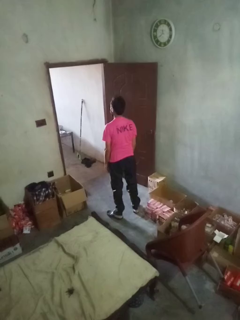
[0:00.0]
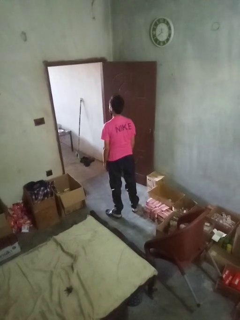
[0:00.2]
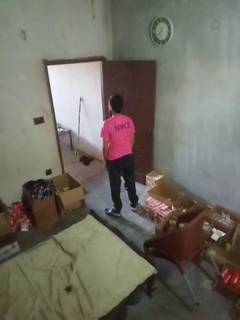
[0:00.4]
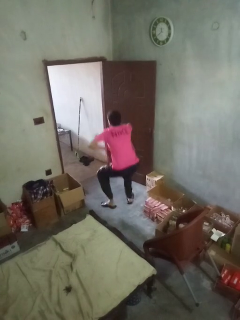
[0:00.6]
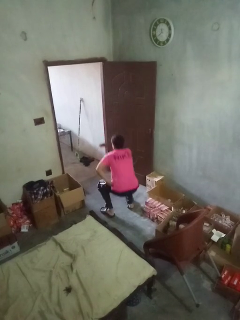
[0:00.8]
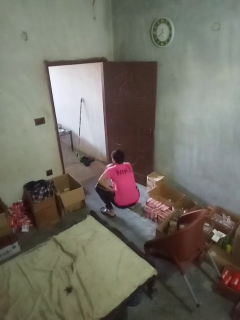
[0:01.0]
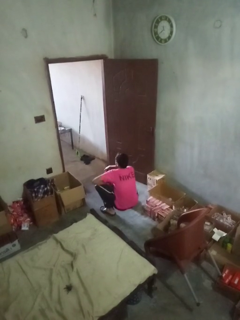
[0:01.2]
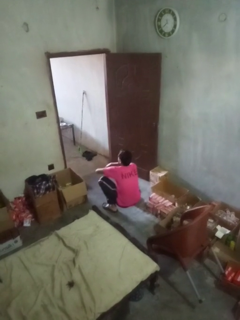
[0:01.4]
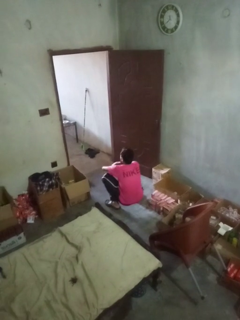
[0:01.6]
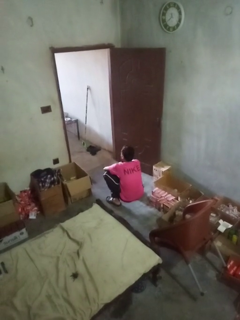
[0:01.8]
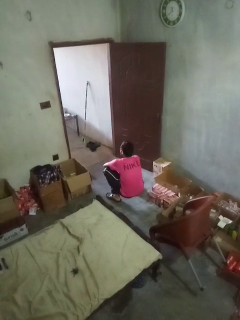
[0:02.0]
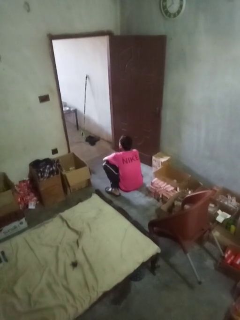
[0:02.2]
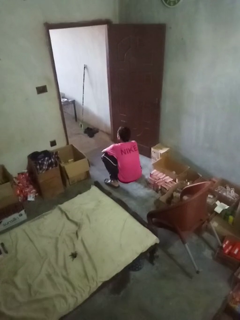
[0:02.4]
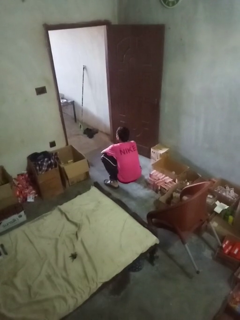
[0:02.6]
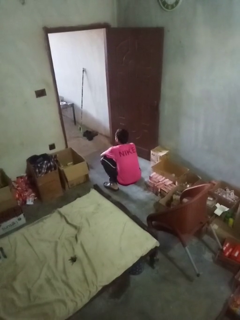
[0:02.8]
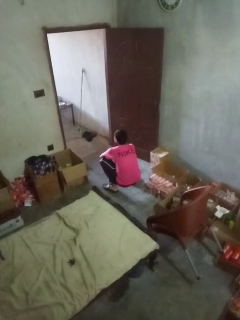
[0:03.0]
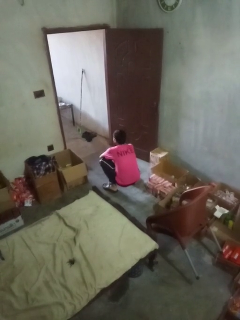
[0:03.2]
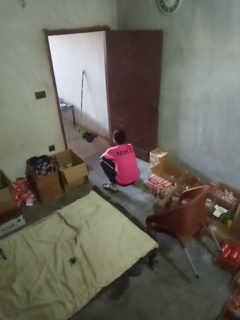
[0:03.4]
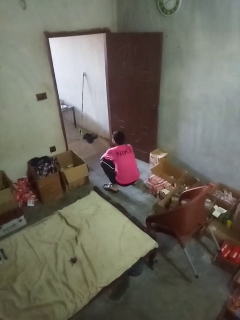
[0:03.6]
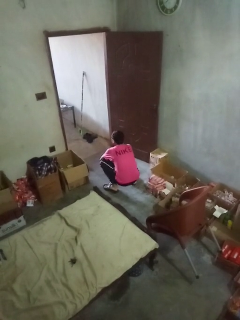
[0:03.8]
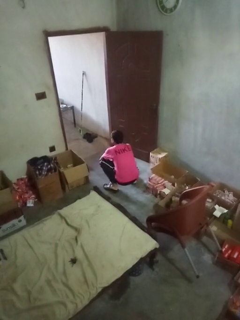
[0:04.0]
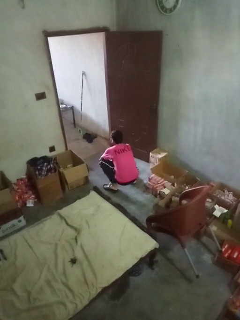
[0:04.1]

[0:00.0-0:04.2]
person trips on object on floor

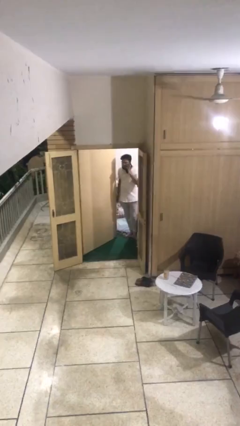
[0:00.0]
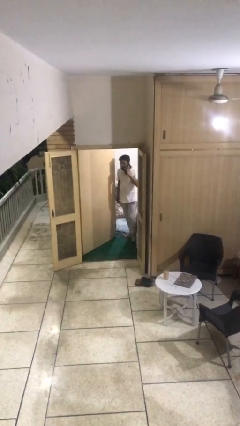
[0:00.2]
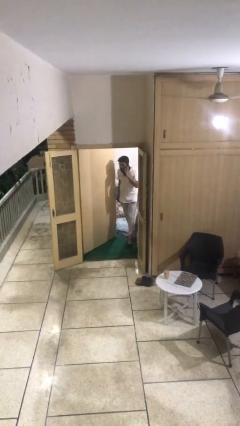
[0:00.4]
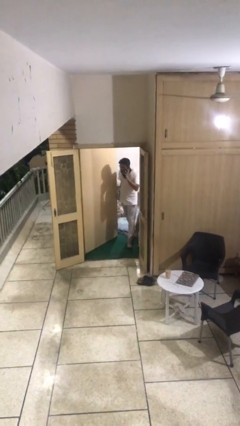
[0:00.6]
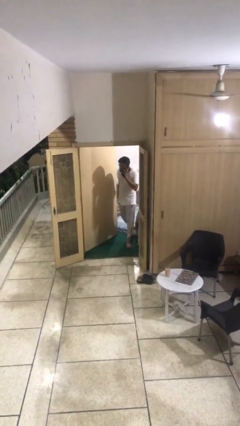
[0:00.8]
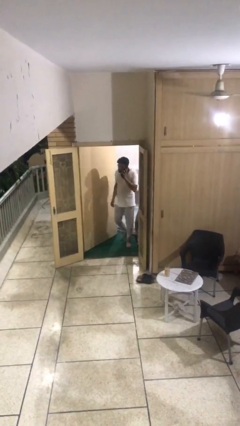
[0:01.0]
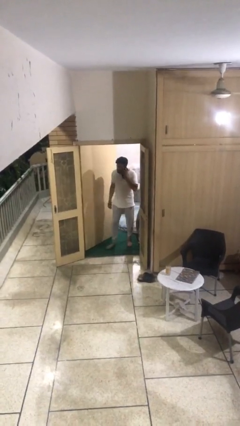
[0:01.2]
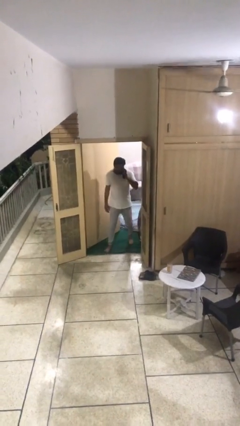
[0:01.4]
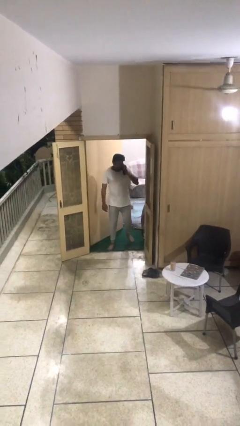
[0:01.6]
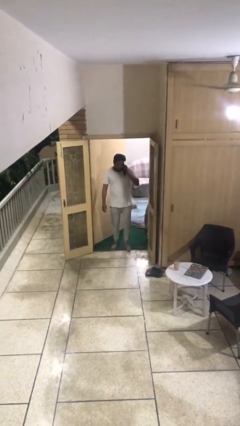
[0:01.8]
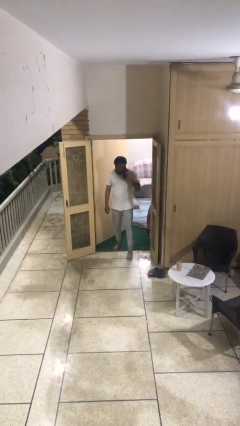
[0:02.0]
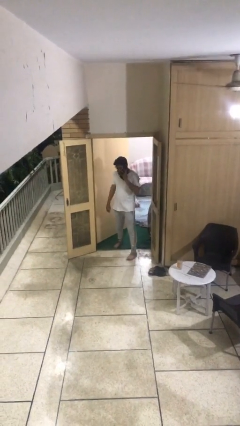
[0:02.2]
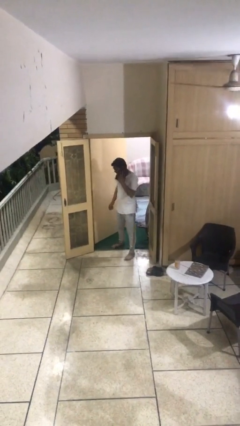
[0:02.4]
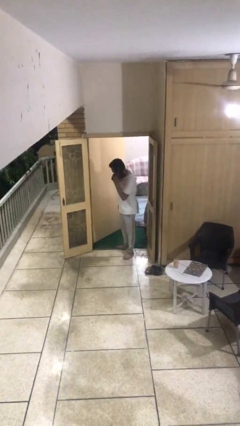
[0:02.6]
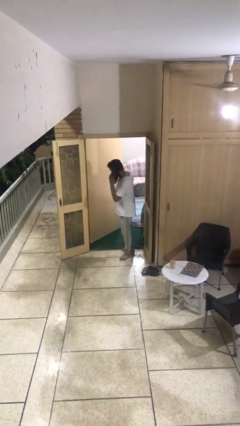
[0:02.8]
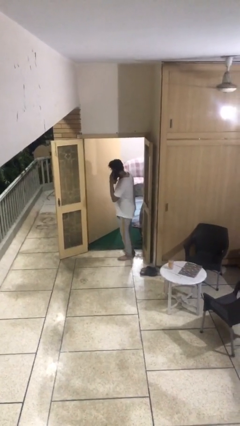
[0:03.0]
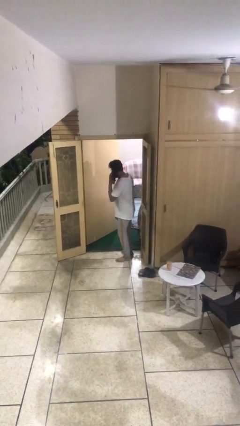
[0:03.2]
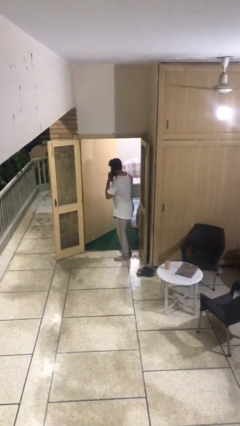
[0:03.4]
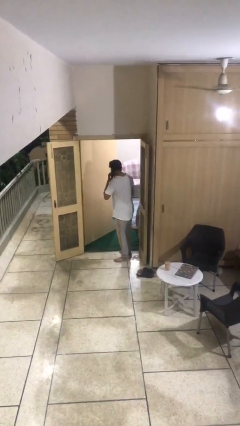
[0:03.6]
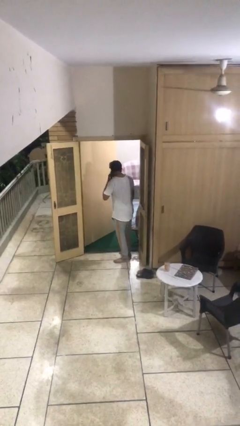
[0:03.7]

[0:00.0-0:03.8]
person enters scene through structure

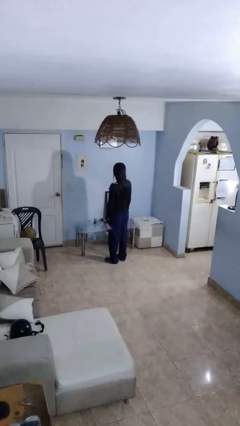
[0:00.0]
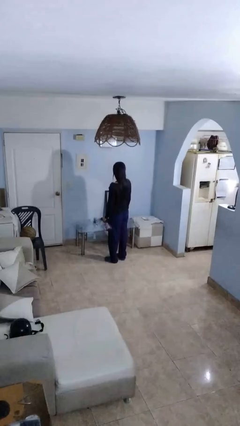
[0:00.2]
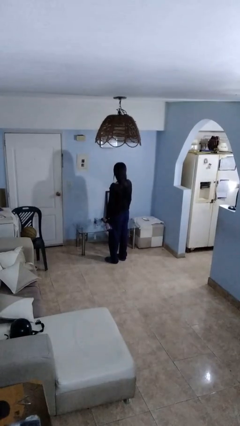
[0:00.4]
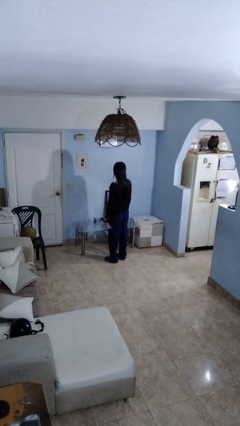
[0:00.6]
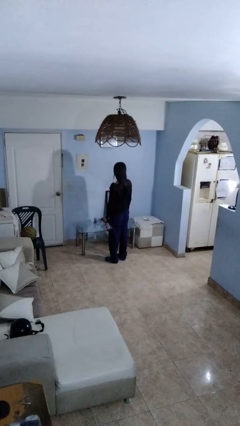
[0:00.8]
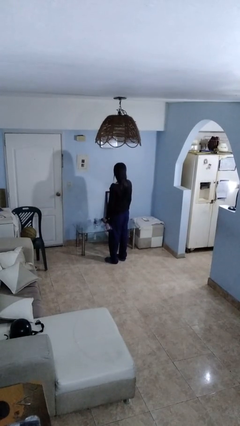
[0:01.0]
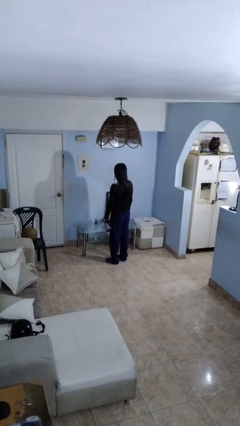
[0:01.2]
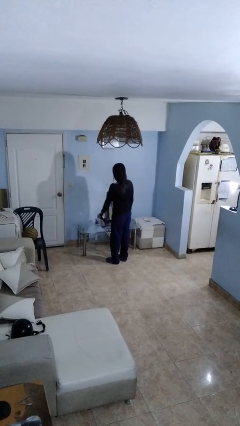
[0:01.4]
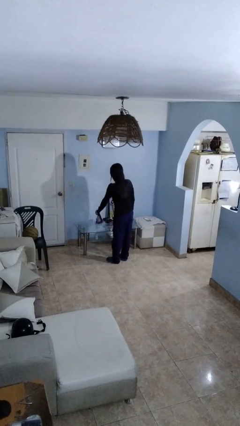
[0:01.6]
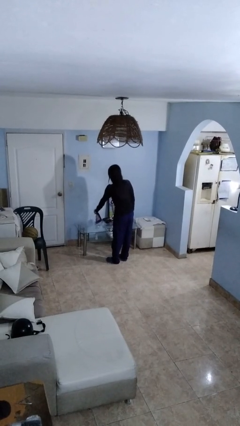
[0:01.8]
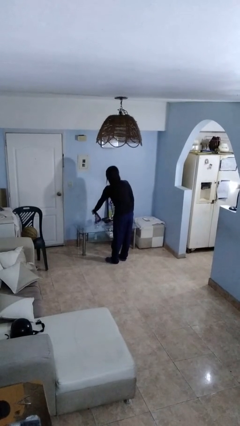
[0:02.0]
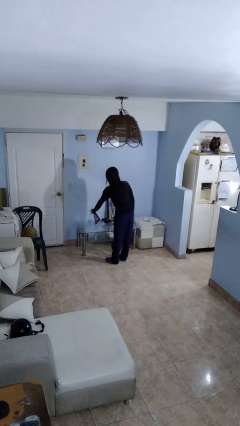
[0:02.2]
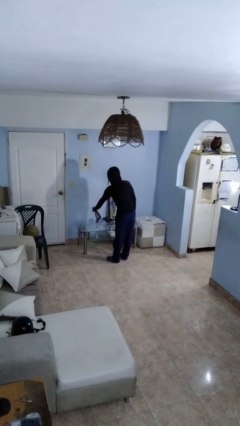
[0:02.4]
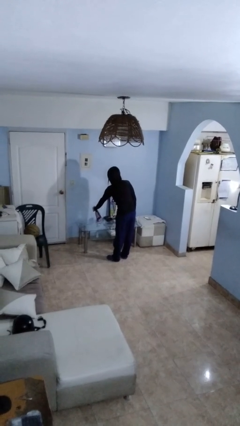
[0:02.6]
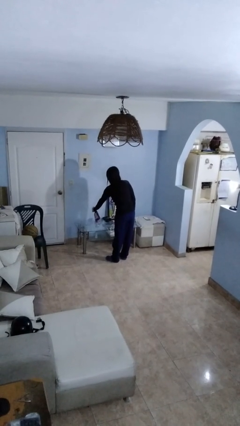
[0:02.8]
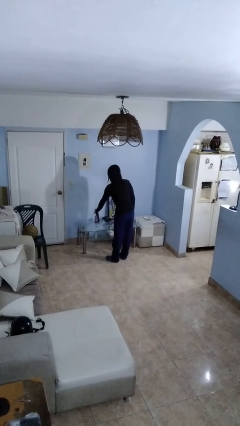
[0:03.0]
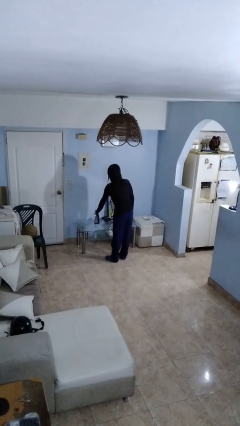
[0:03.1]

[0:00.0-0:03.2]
person sprays from bottle

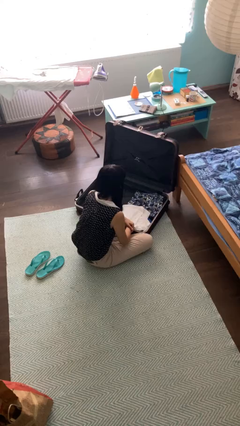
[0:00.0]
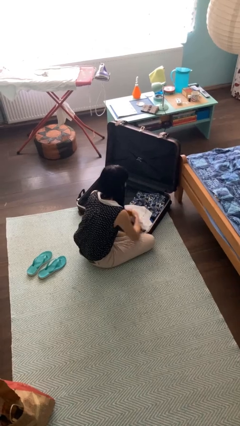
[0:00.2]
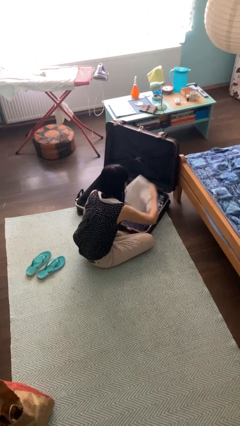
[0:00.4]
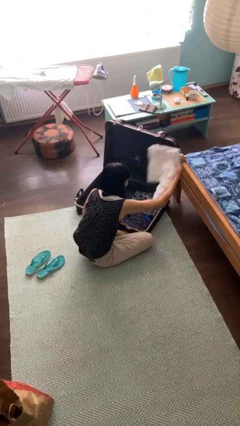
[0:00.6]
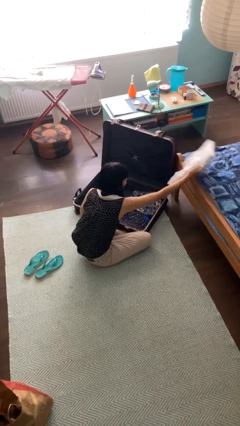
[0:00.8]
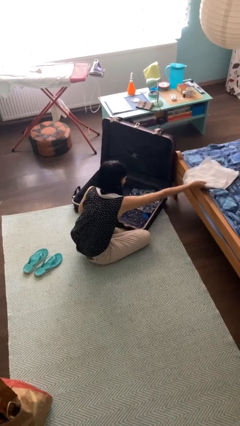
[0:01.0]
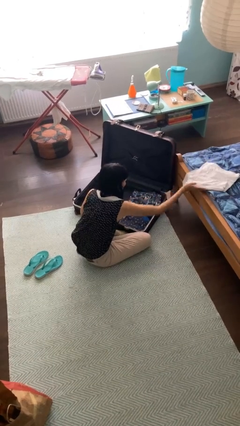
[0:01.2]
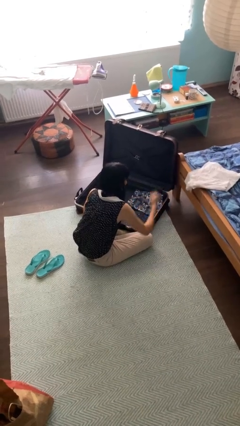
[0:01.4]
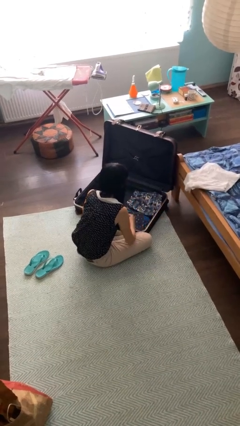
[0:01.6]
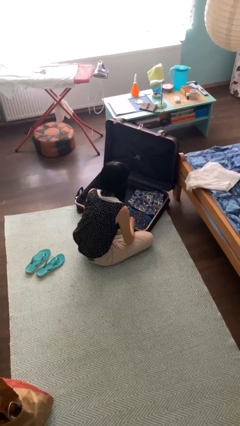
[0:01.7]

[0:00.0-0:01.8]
person unloads clothes from suitcase

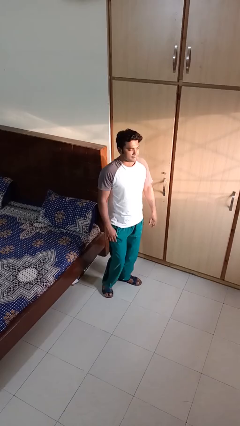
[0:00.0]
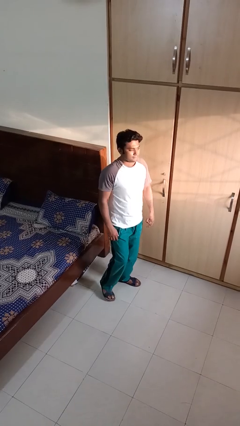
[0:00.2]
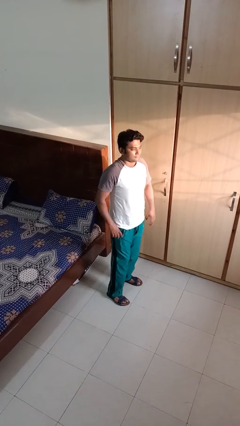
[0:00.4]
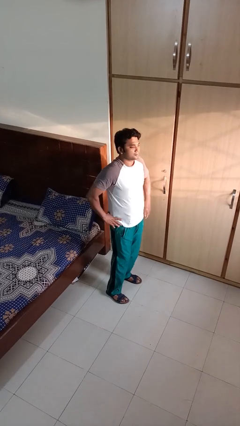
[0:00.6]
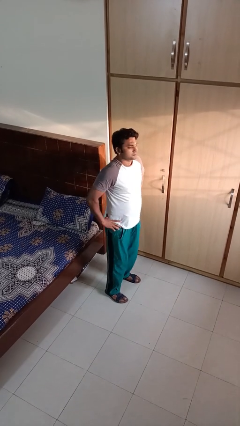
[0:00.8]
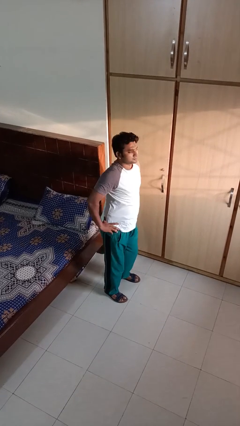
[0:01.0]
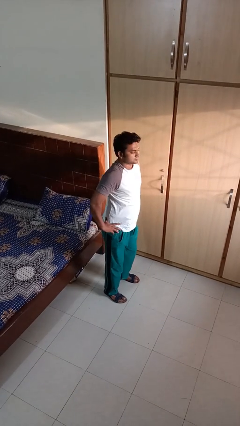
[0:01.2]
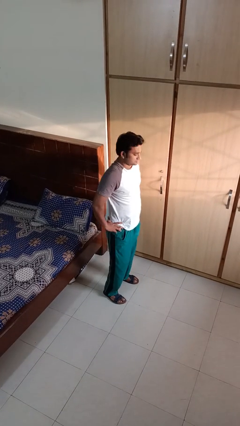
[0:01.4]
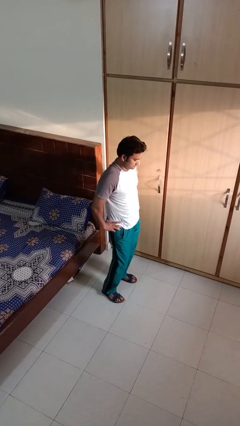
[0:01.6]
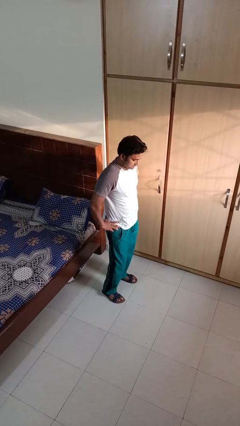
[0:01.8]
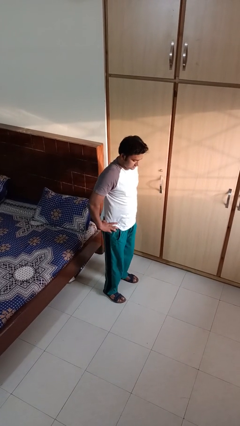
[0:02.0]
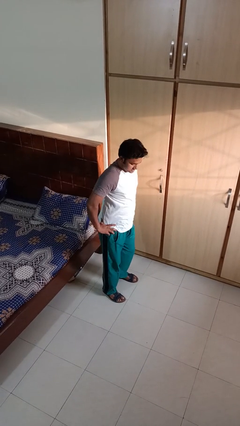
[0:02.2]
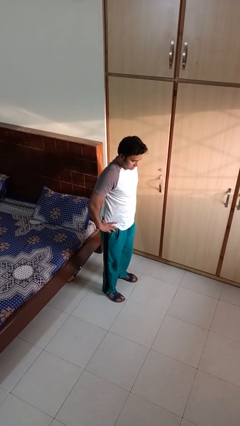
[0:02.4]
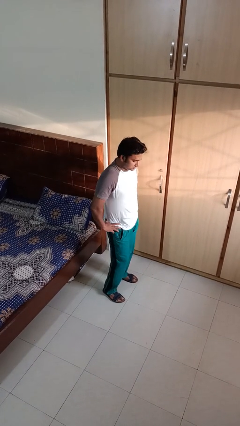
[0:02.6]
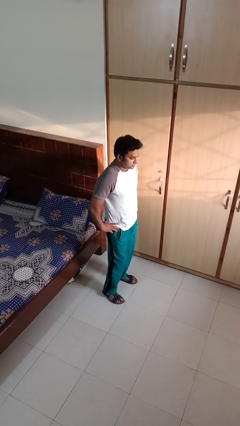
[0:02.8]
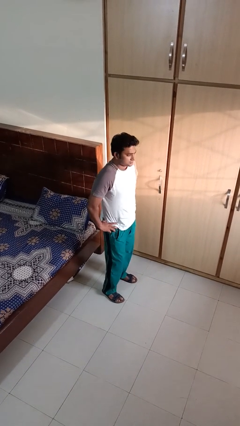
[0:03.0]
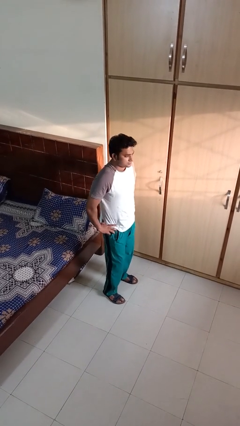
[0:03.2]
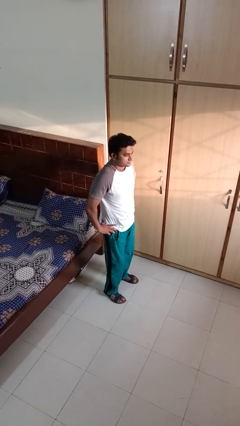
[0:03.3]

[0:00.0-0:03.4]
person wiggles hips

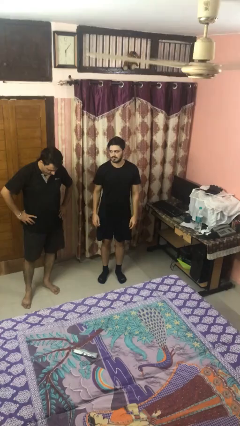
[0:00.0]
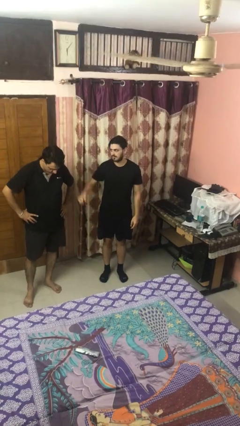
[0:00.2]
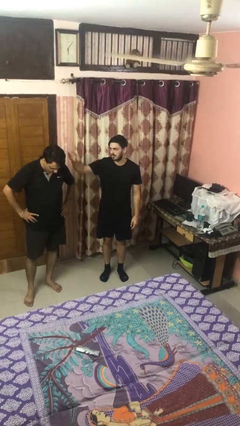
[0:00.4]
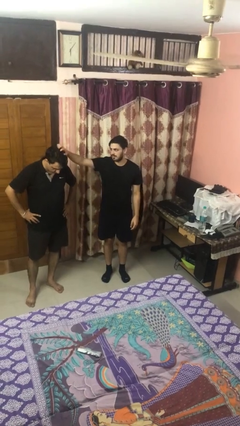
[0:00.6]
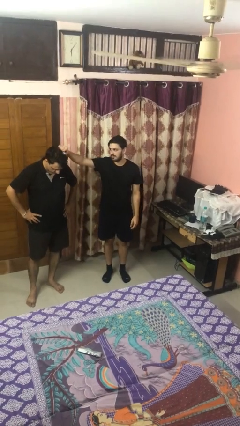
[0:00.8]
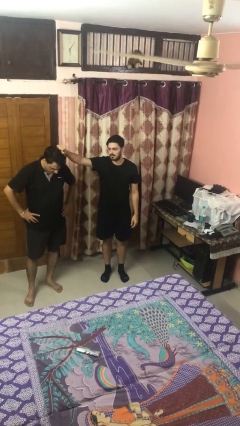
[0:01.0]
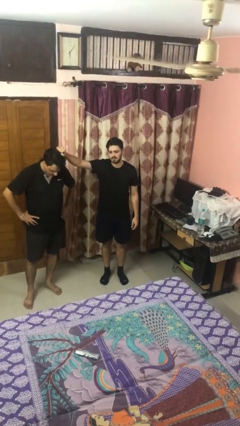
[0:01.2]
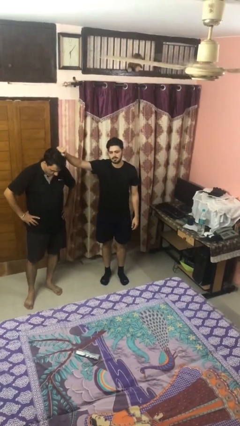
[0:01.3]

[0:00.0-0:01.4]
person grabs person by hair

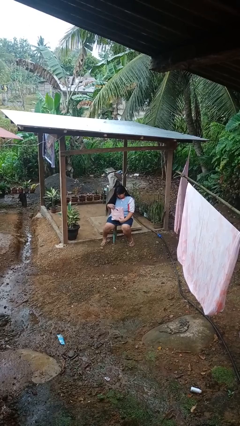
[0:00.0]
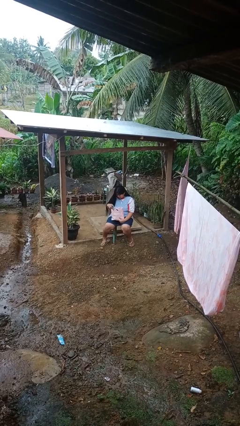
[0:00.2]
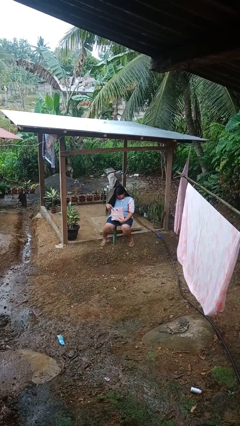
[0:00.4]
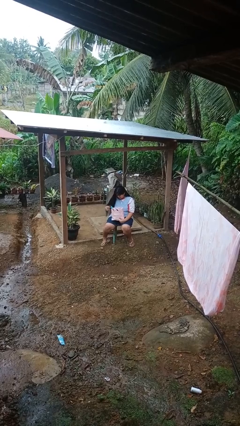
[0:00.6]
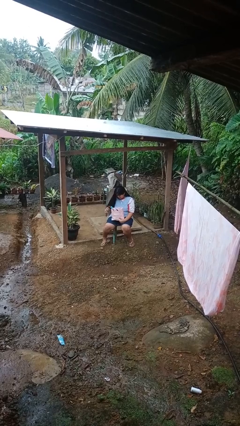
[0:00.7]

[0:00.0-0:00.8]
person puts object into bag
